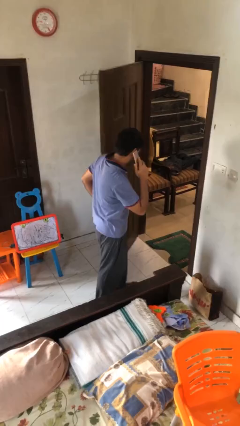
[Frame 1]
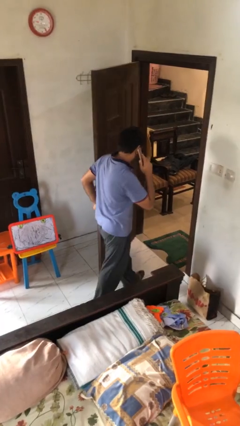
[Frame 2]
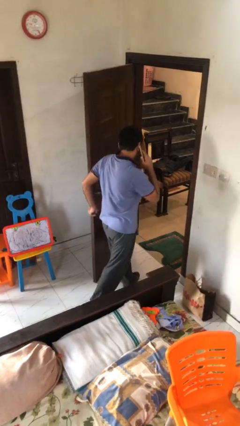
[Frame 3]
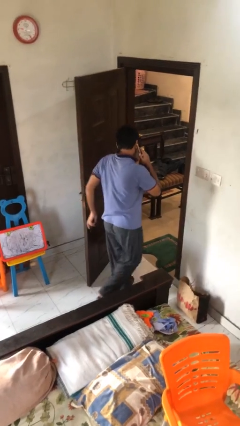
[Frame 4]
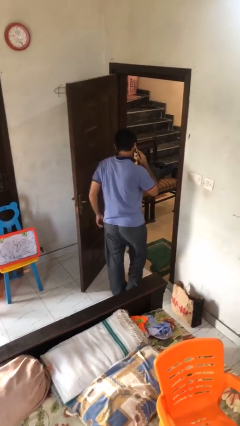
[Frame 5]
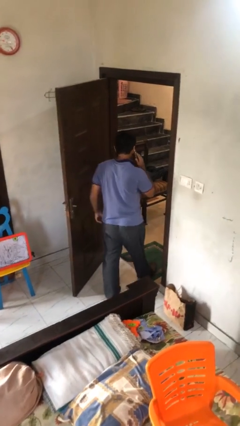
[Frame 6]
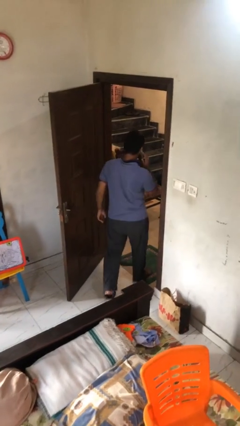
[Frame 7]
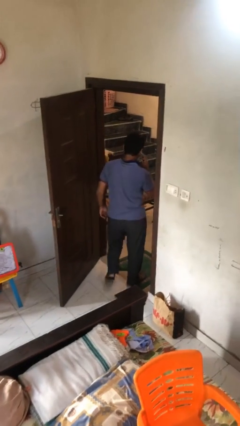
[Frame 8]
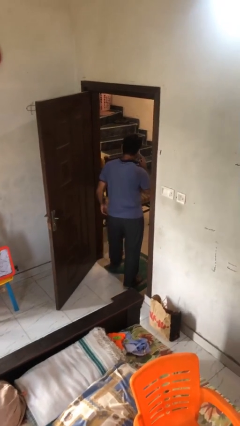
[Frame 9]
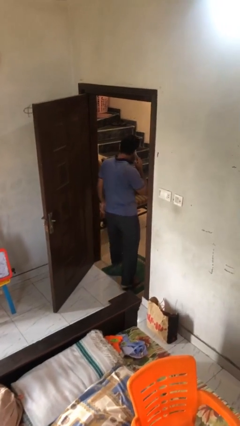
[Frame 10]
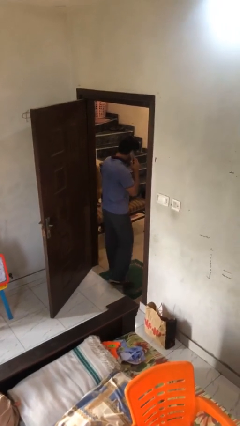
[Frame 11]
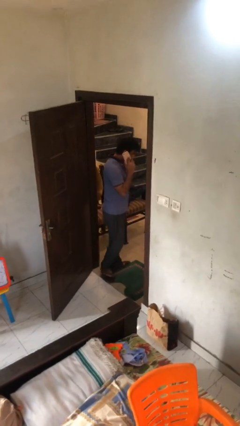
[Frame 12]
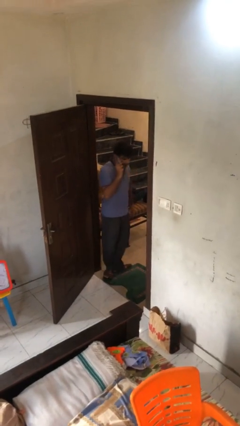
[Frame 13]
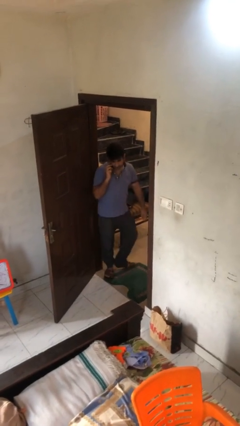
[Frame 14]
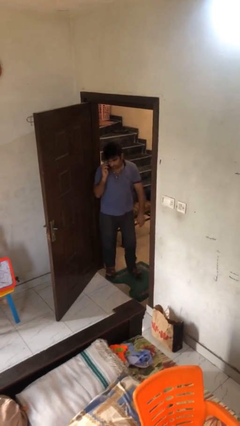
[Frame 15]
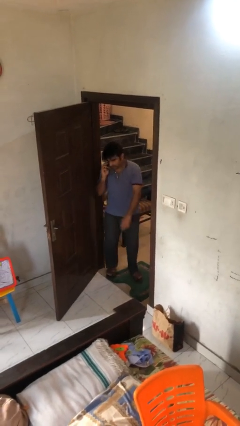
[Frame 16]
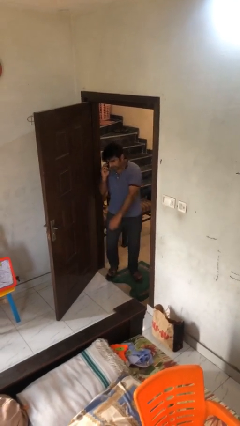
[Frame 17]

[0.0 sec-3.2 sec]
person exits scene through structure

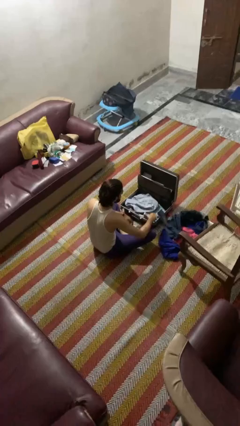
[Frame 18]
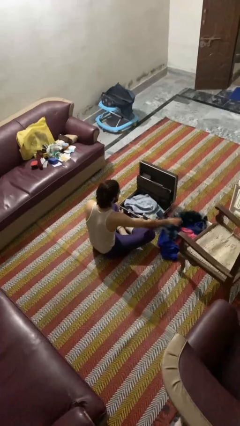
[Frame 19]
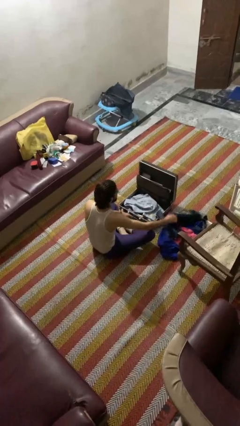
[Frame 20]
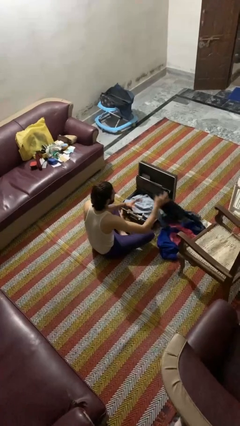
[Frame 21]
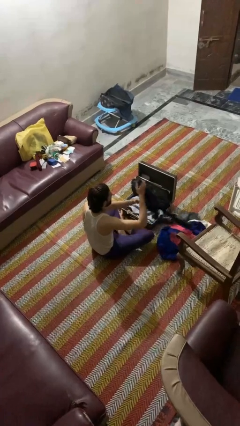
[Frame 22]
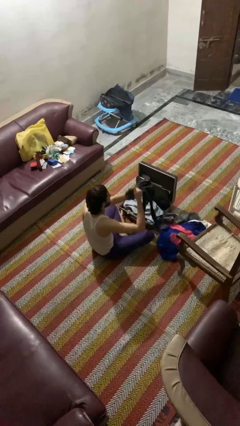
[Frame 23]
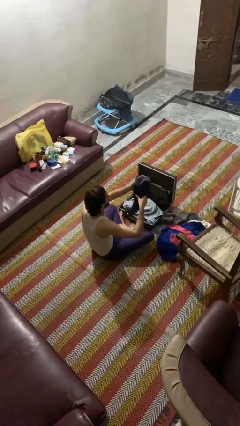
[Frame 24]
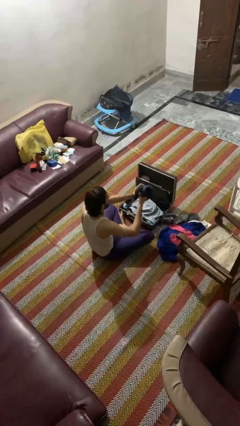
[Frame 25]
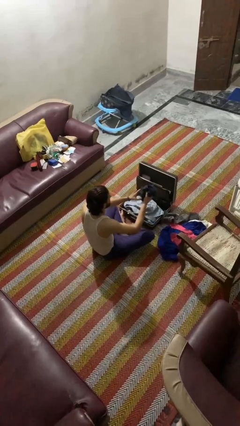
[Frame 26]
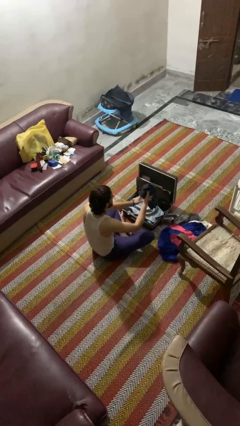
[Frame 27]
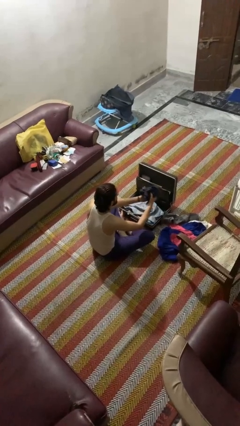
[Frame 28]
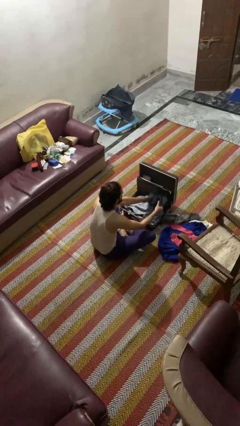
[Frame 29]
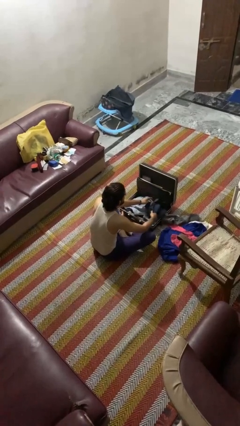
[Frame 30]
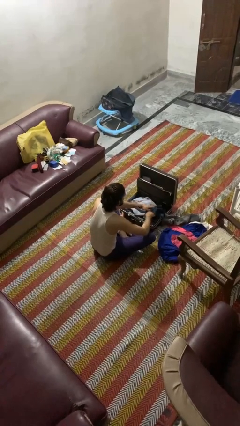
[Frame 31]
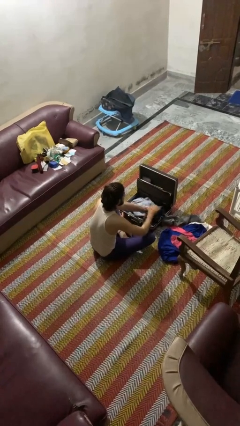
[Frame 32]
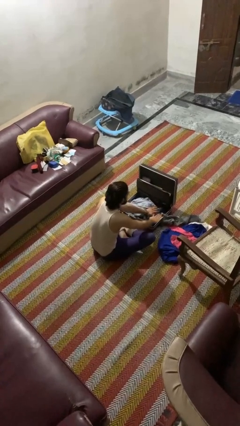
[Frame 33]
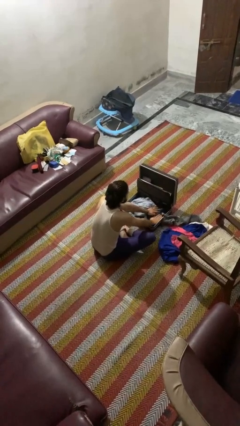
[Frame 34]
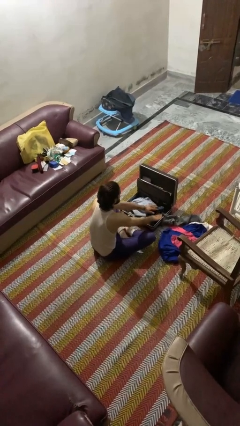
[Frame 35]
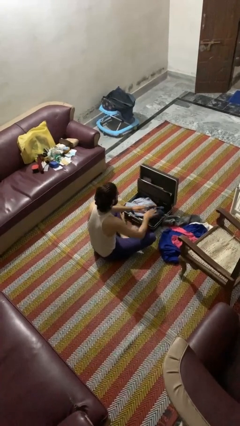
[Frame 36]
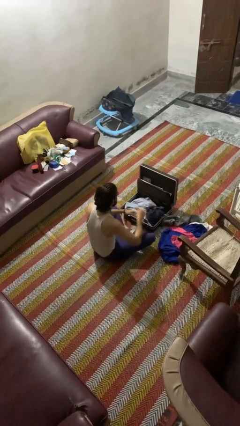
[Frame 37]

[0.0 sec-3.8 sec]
person loads clothes into suitcase

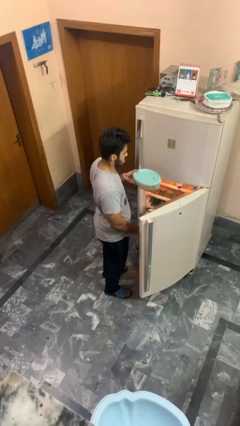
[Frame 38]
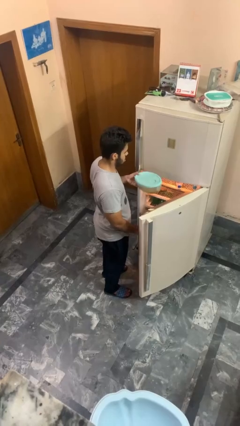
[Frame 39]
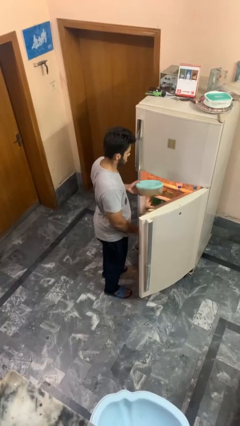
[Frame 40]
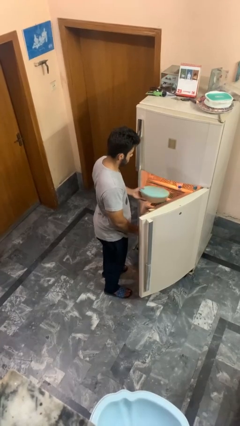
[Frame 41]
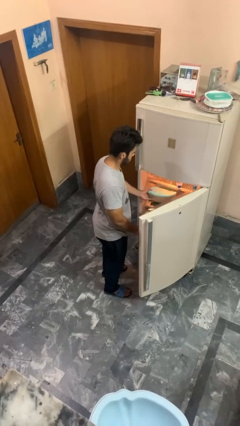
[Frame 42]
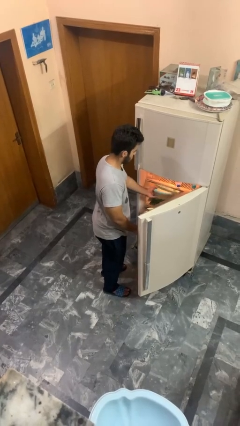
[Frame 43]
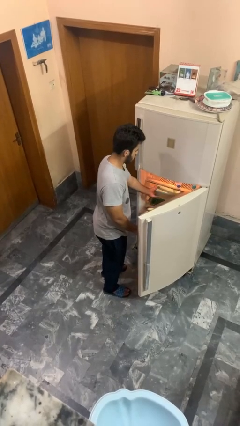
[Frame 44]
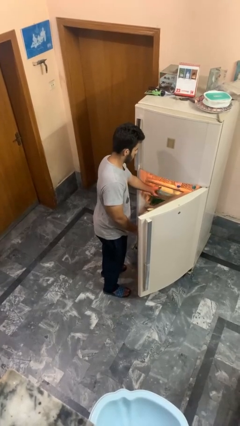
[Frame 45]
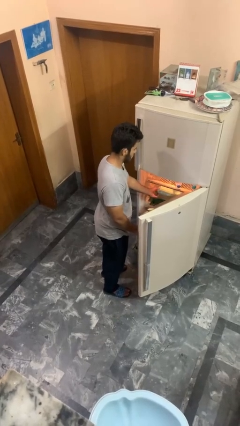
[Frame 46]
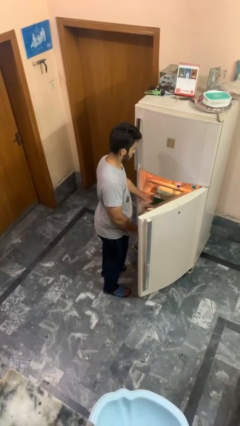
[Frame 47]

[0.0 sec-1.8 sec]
person puts down object into cabinet

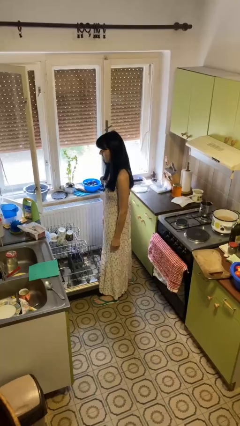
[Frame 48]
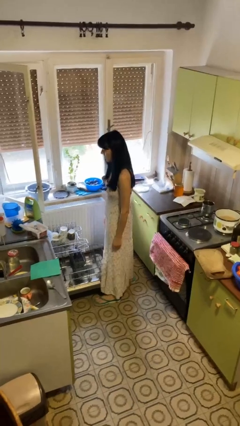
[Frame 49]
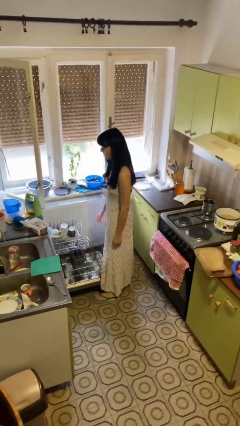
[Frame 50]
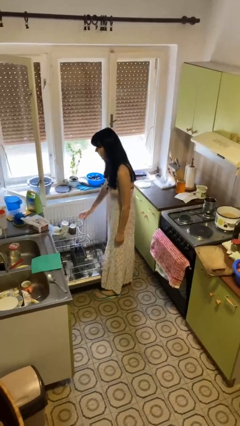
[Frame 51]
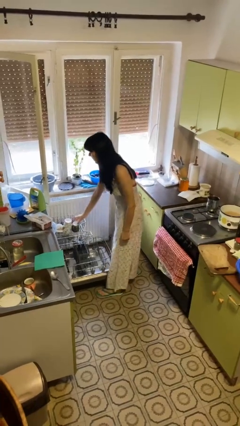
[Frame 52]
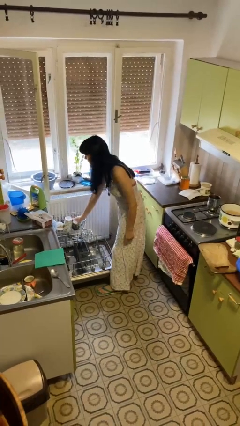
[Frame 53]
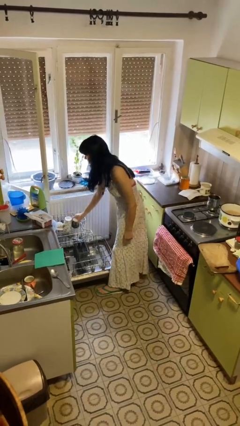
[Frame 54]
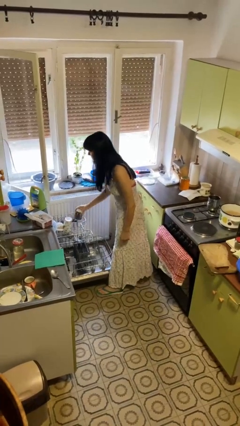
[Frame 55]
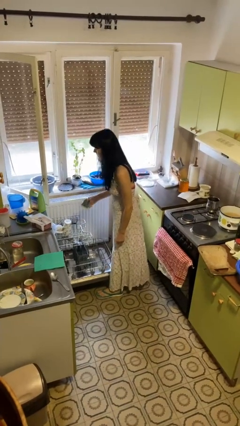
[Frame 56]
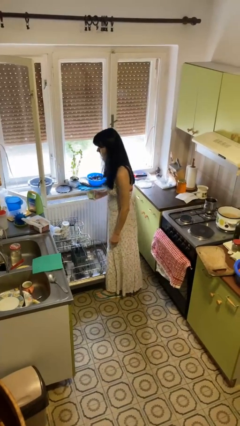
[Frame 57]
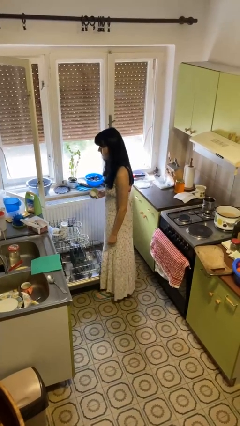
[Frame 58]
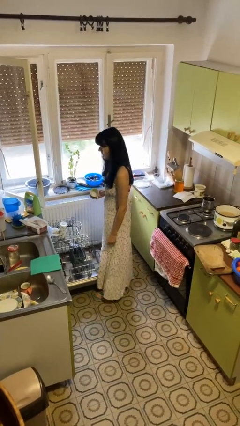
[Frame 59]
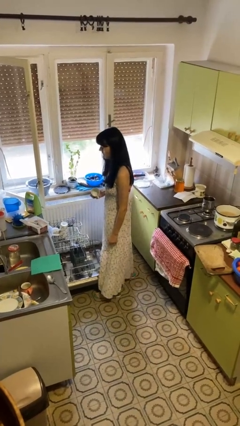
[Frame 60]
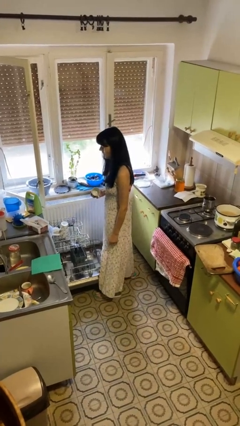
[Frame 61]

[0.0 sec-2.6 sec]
person unloads dishwasher

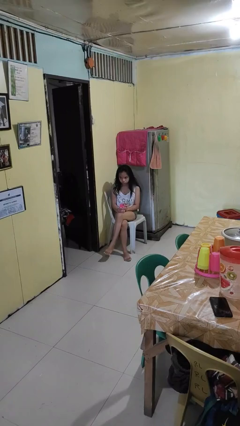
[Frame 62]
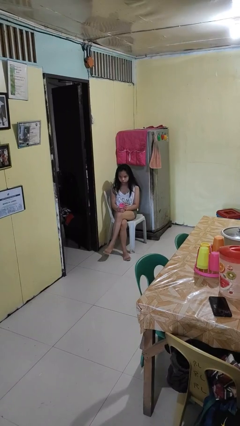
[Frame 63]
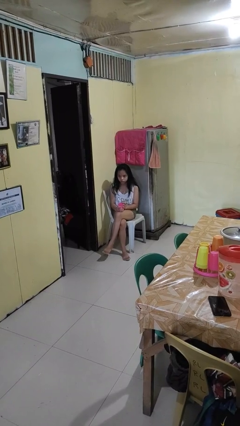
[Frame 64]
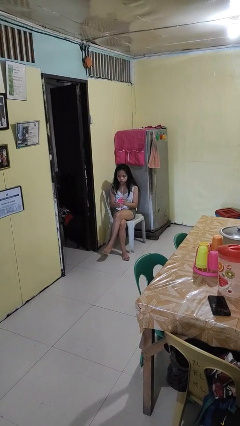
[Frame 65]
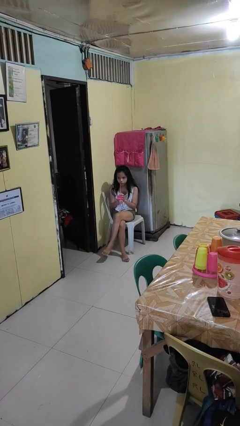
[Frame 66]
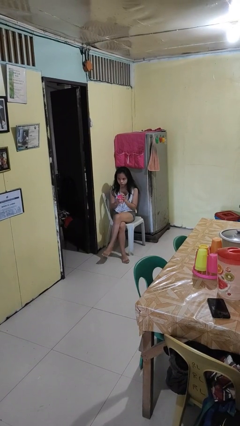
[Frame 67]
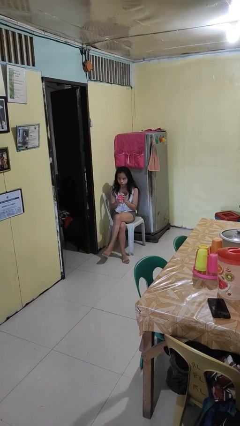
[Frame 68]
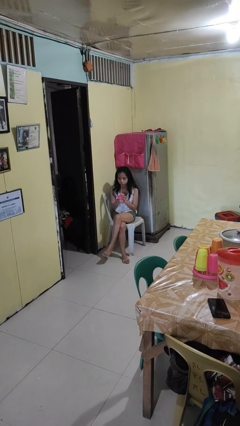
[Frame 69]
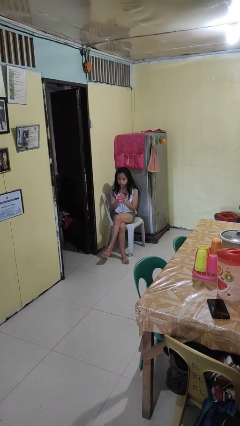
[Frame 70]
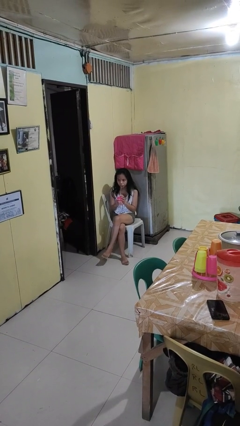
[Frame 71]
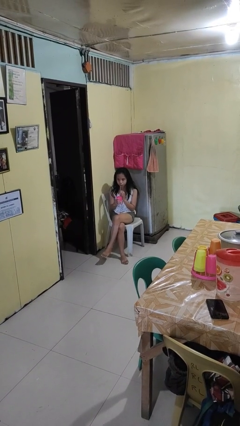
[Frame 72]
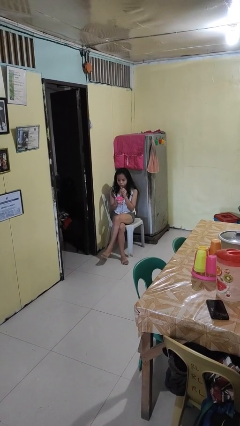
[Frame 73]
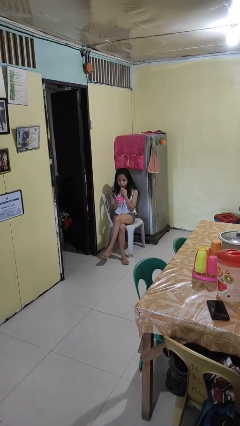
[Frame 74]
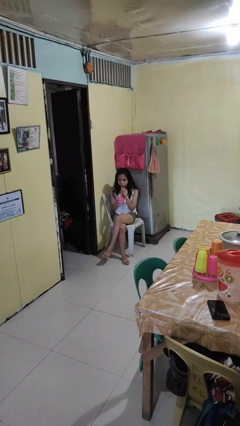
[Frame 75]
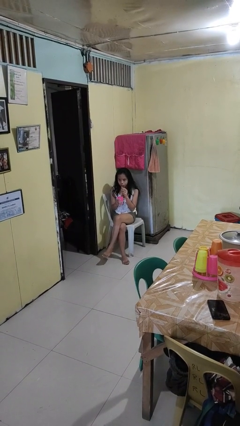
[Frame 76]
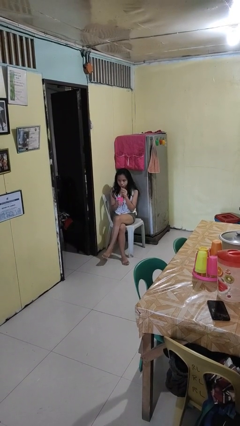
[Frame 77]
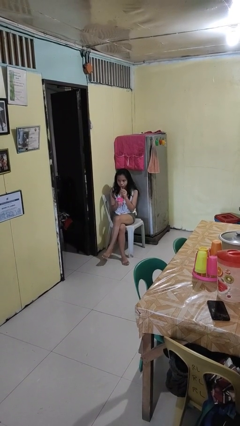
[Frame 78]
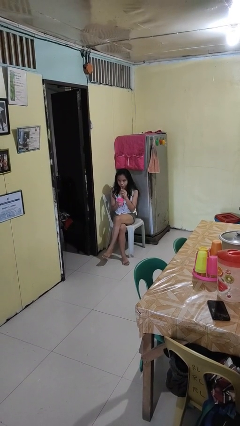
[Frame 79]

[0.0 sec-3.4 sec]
person drinks from straw

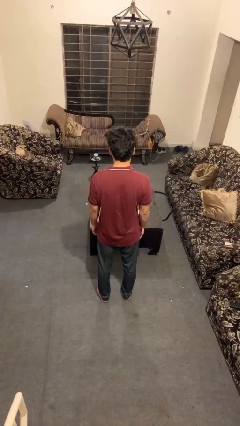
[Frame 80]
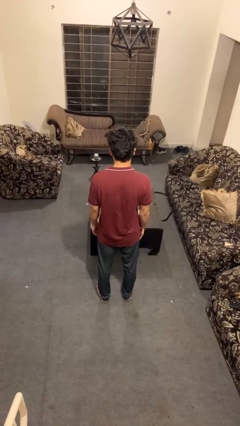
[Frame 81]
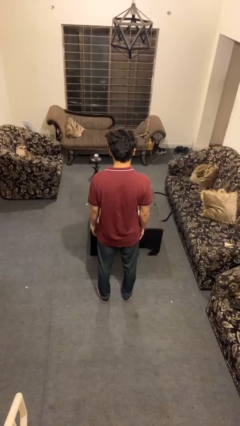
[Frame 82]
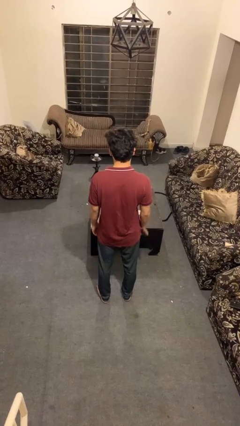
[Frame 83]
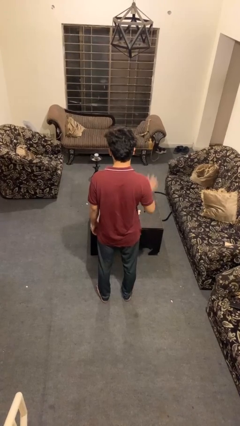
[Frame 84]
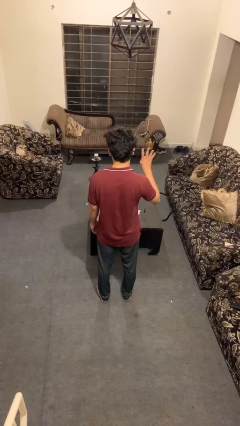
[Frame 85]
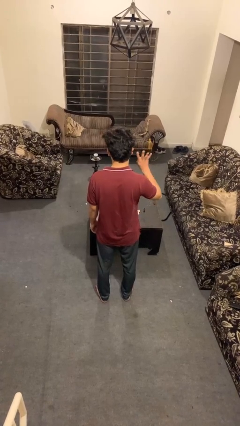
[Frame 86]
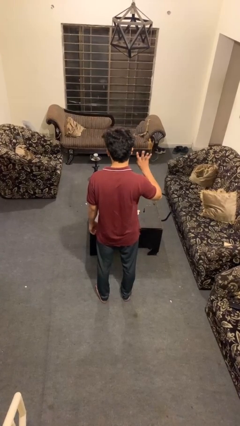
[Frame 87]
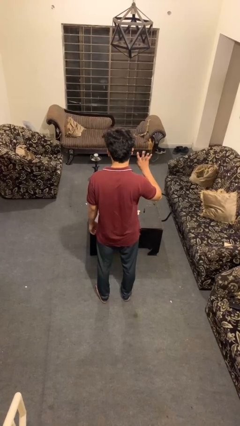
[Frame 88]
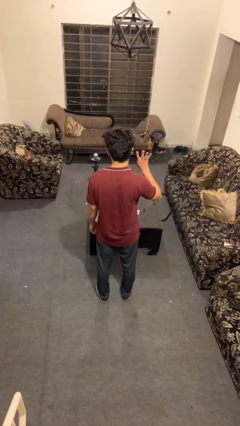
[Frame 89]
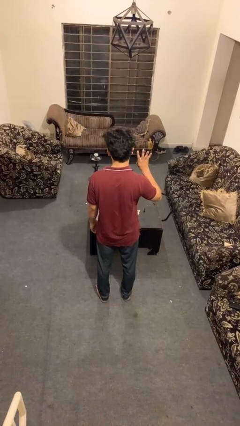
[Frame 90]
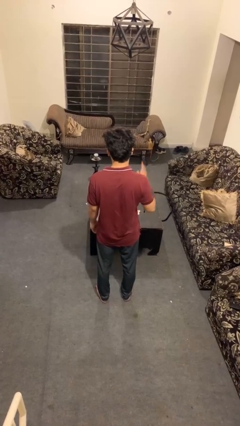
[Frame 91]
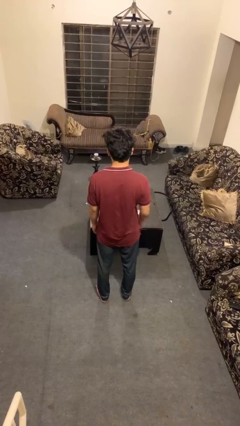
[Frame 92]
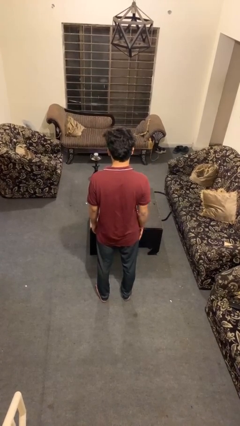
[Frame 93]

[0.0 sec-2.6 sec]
person gestures number four
